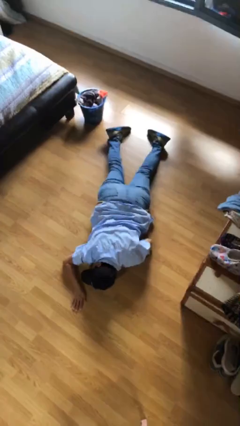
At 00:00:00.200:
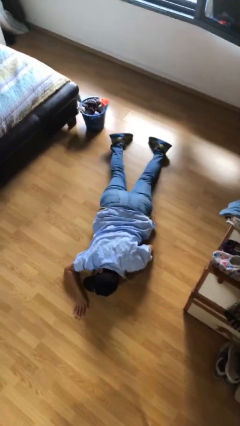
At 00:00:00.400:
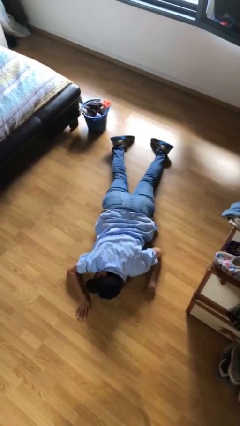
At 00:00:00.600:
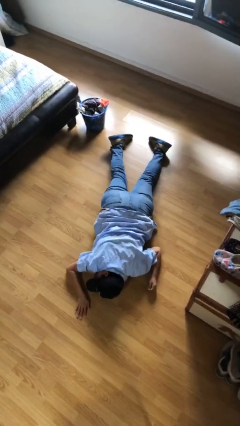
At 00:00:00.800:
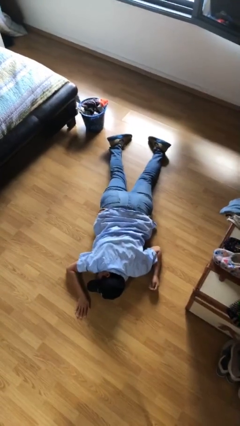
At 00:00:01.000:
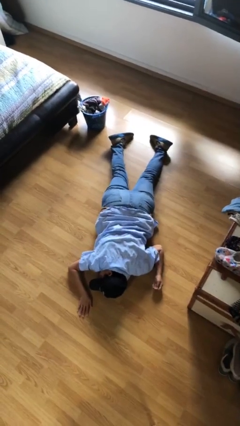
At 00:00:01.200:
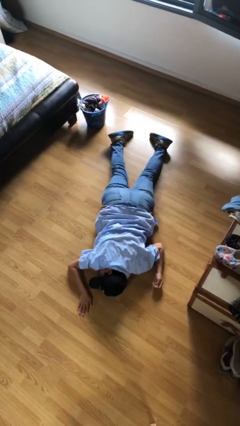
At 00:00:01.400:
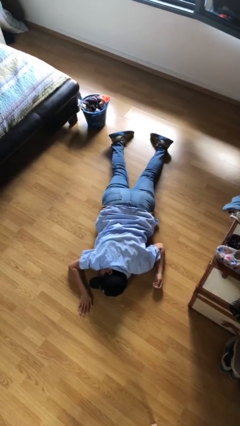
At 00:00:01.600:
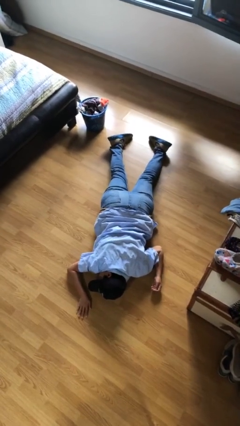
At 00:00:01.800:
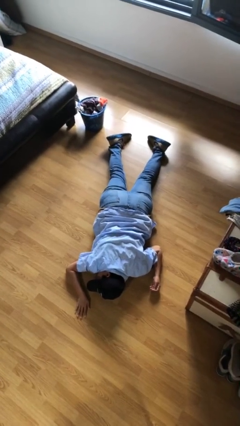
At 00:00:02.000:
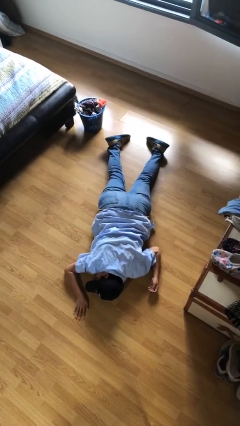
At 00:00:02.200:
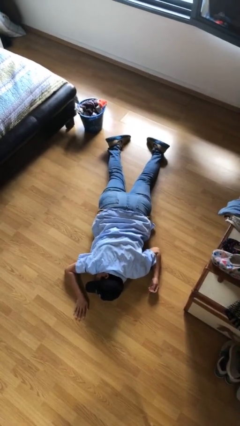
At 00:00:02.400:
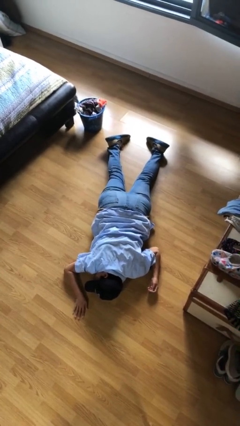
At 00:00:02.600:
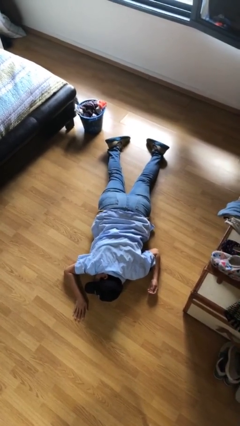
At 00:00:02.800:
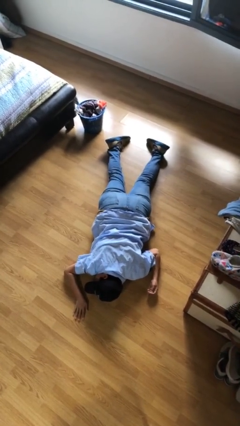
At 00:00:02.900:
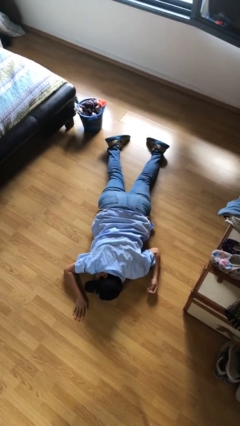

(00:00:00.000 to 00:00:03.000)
person lies down on floor

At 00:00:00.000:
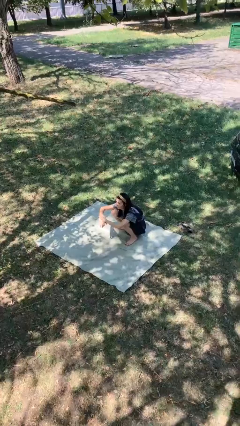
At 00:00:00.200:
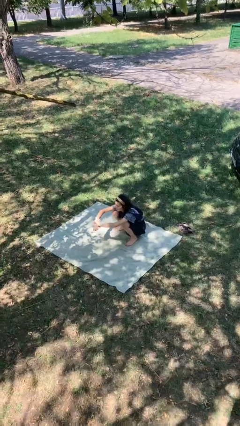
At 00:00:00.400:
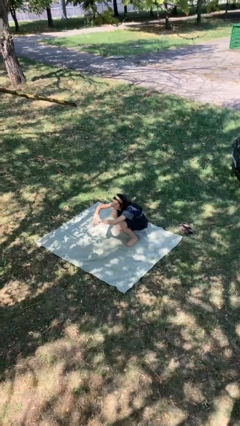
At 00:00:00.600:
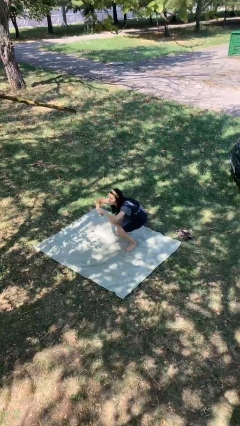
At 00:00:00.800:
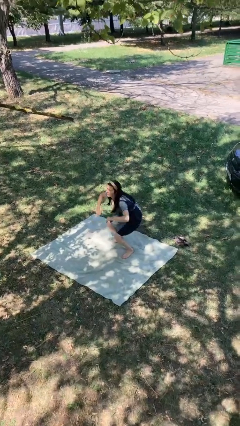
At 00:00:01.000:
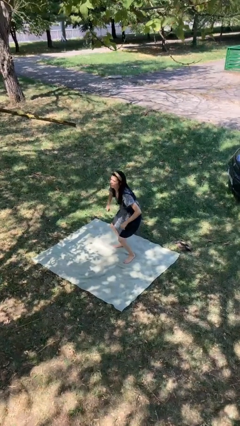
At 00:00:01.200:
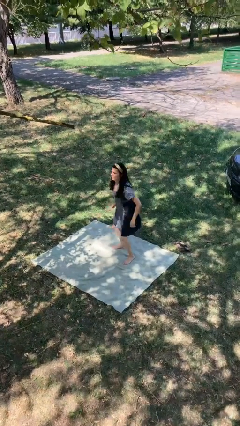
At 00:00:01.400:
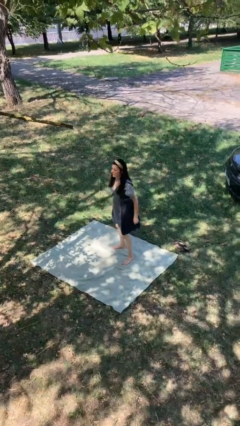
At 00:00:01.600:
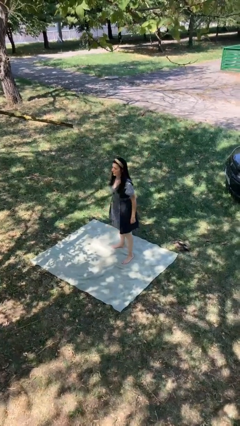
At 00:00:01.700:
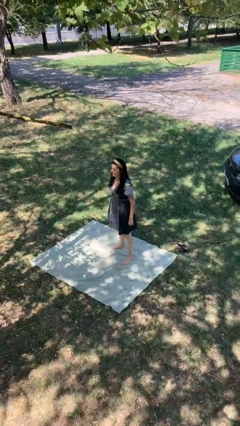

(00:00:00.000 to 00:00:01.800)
person stands up

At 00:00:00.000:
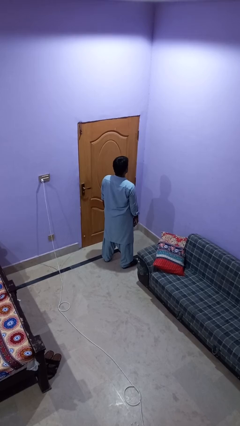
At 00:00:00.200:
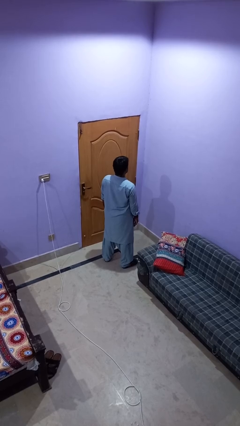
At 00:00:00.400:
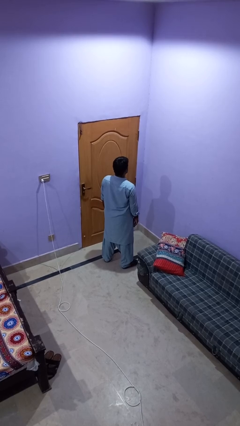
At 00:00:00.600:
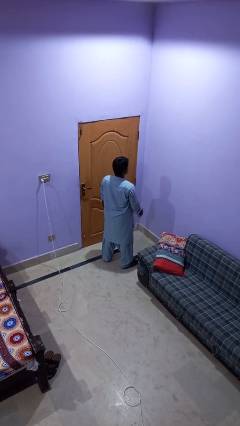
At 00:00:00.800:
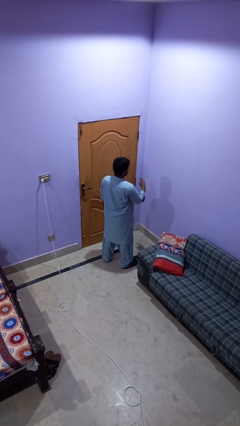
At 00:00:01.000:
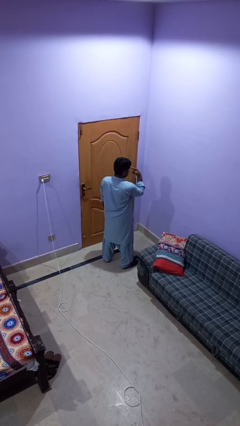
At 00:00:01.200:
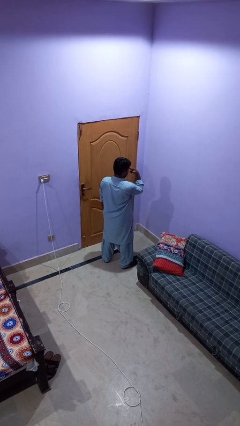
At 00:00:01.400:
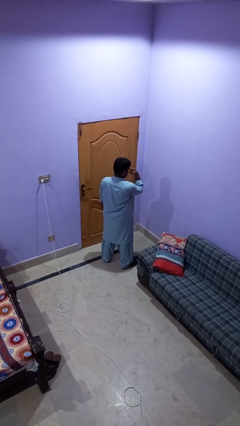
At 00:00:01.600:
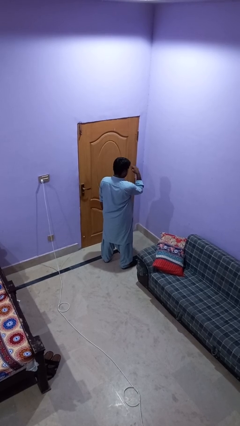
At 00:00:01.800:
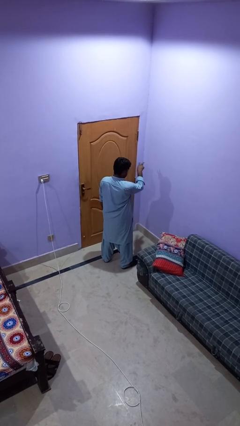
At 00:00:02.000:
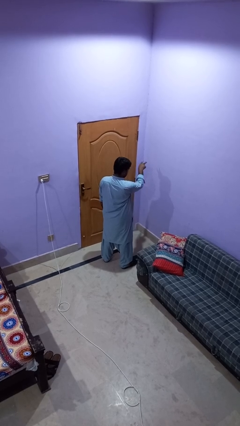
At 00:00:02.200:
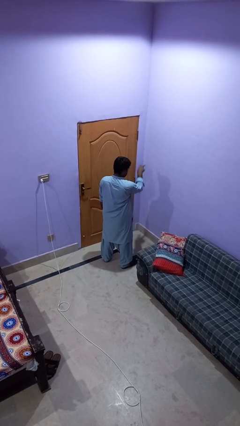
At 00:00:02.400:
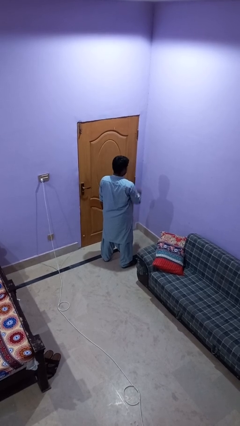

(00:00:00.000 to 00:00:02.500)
person gestures watch closely

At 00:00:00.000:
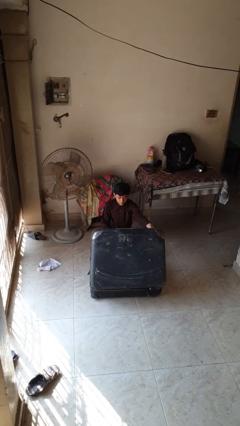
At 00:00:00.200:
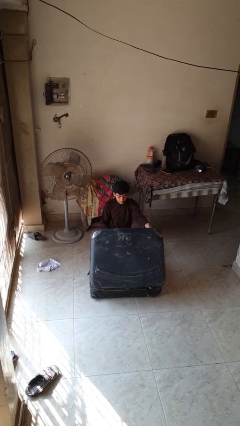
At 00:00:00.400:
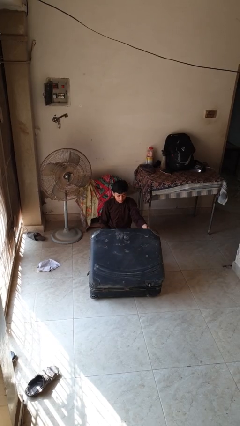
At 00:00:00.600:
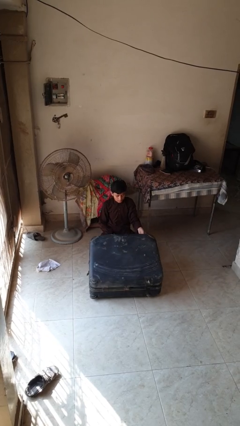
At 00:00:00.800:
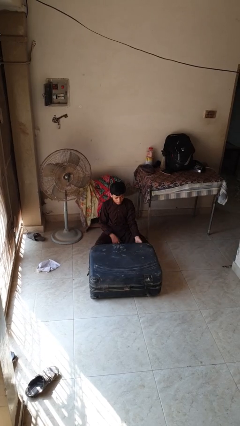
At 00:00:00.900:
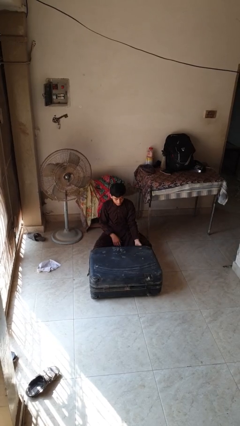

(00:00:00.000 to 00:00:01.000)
person closes suitcase

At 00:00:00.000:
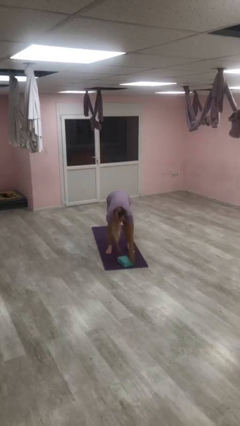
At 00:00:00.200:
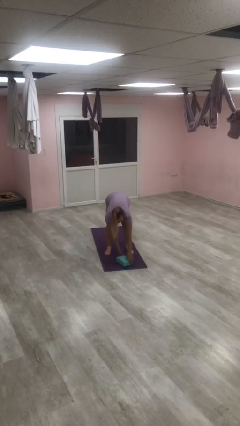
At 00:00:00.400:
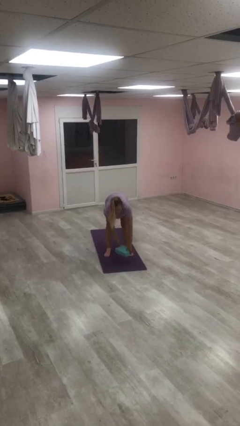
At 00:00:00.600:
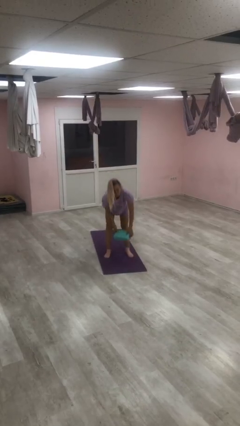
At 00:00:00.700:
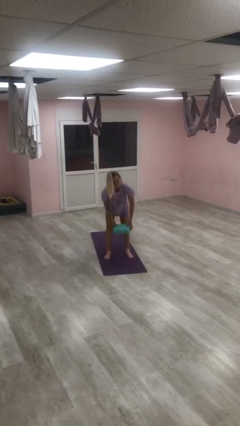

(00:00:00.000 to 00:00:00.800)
person picks up object from floor

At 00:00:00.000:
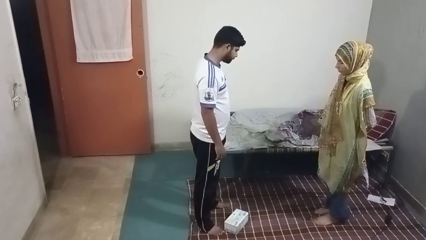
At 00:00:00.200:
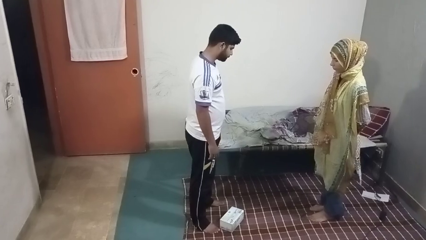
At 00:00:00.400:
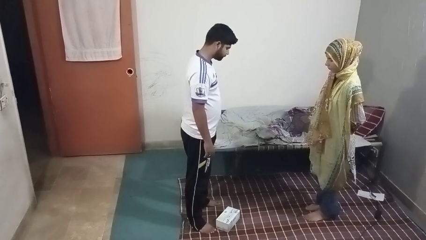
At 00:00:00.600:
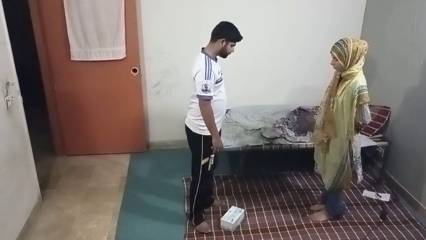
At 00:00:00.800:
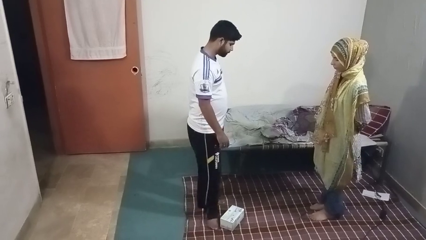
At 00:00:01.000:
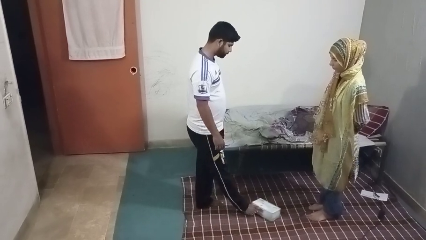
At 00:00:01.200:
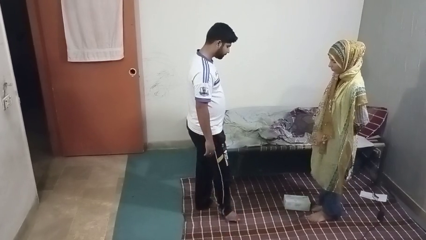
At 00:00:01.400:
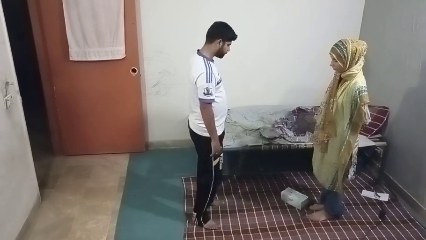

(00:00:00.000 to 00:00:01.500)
person kicks object to person

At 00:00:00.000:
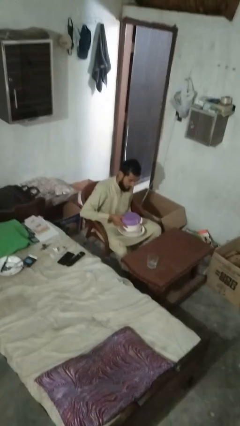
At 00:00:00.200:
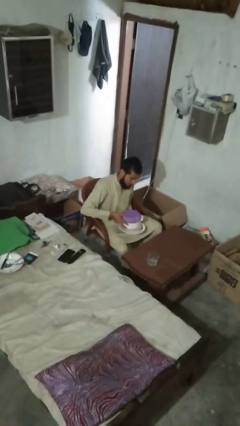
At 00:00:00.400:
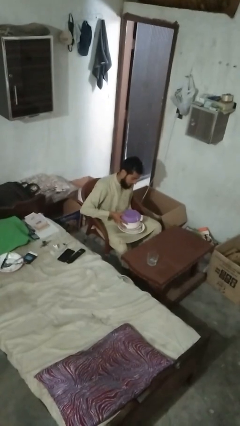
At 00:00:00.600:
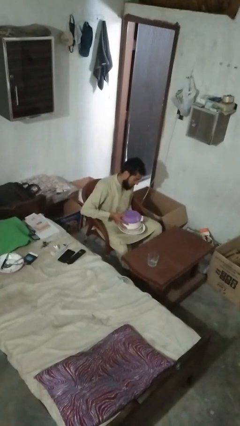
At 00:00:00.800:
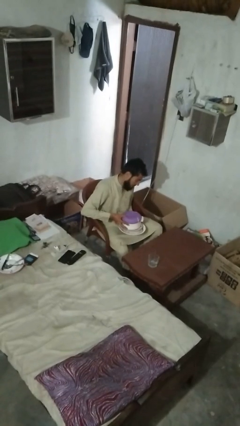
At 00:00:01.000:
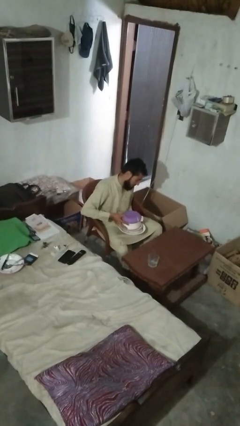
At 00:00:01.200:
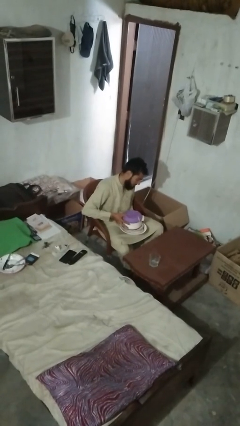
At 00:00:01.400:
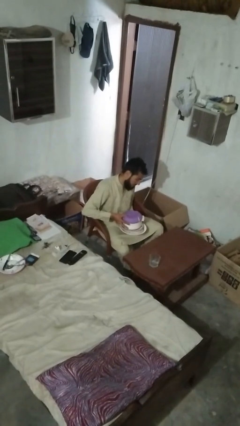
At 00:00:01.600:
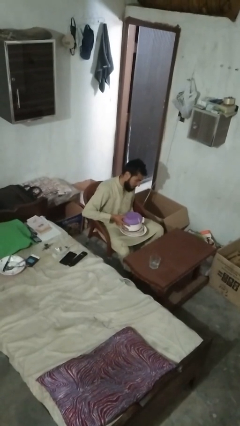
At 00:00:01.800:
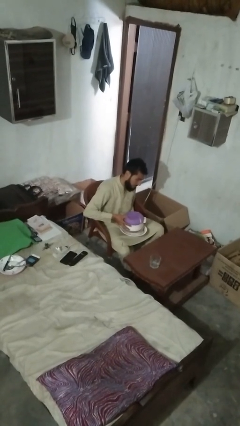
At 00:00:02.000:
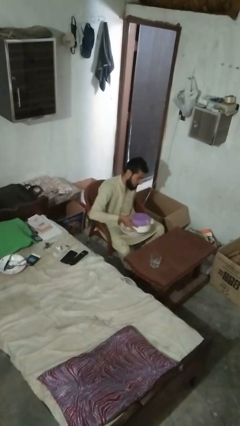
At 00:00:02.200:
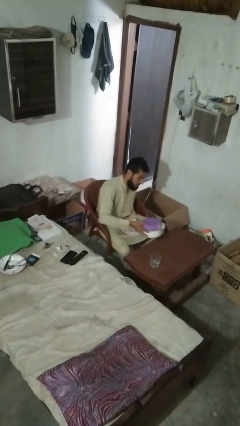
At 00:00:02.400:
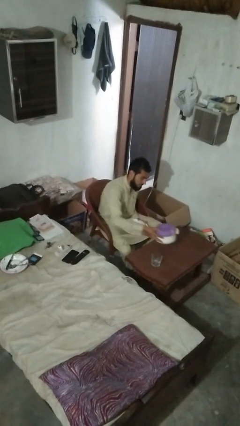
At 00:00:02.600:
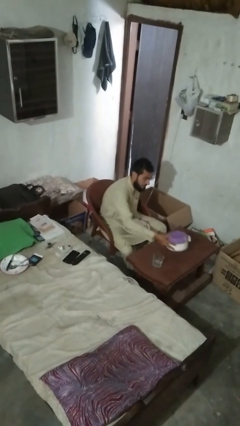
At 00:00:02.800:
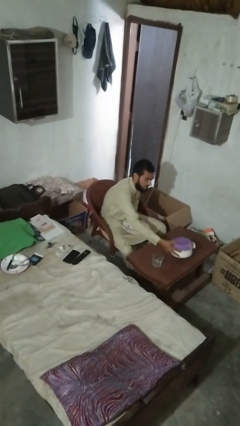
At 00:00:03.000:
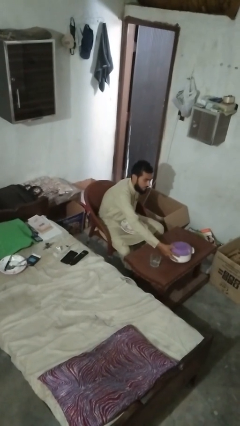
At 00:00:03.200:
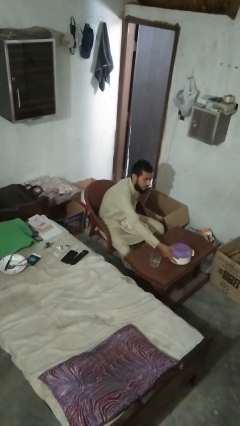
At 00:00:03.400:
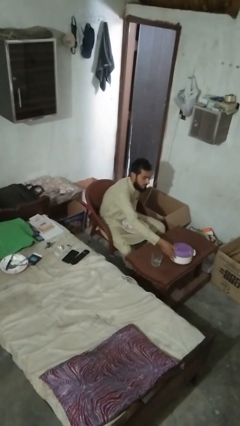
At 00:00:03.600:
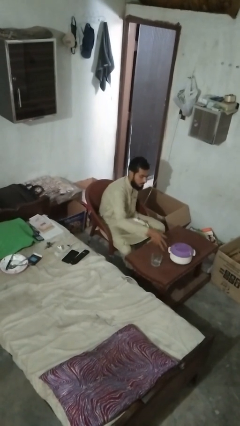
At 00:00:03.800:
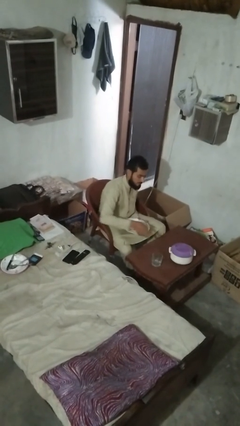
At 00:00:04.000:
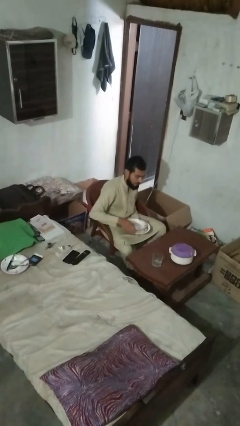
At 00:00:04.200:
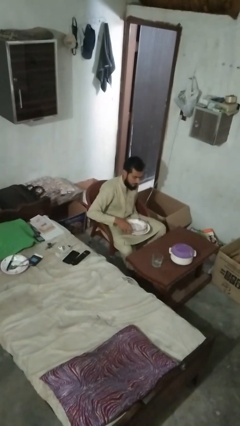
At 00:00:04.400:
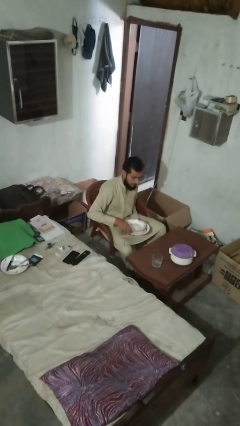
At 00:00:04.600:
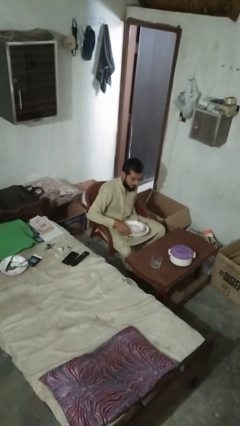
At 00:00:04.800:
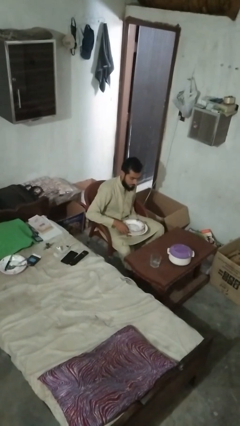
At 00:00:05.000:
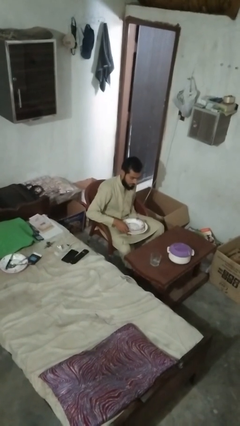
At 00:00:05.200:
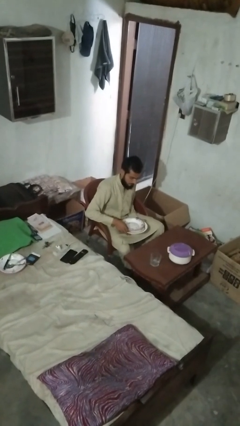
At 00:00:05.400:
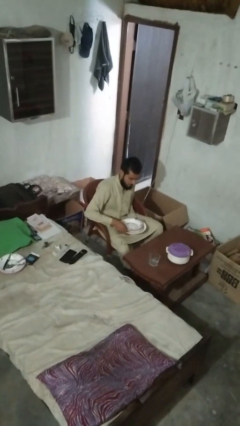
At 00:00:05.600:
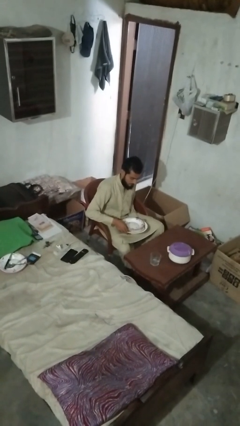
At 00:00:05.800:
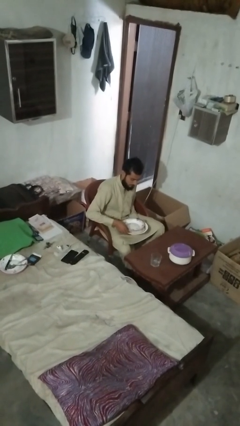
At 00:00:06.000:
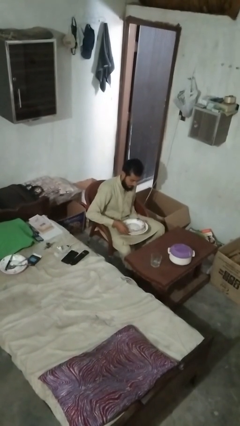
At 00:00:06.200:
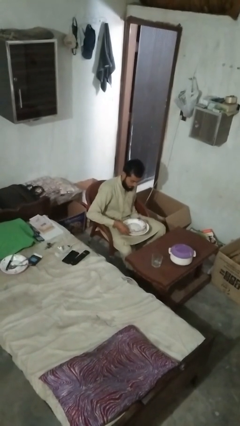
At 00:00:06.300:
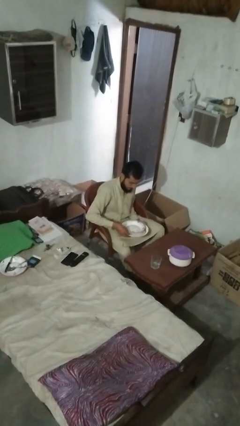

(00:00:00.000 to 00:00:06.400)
person sets table
